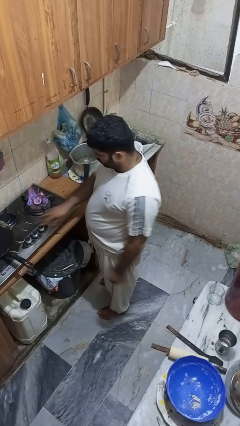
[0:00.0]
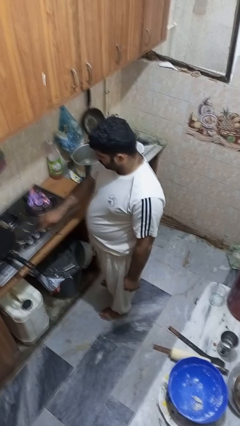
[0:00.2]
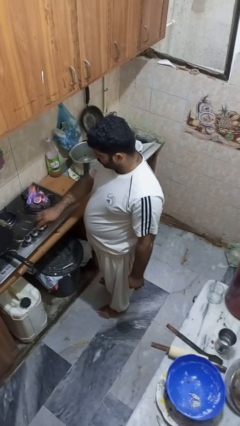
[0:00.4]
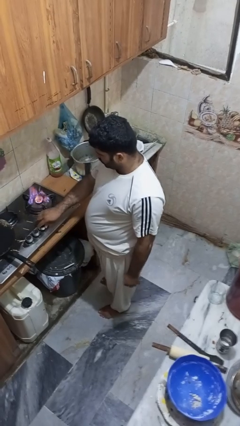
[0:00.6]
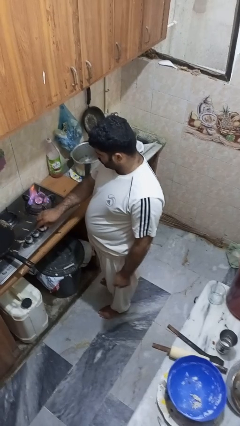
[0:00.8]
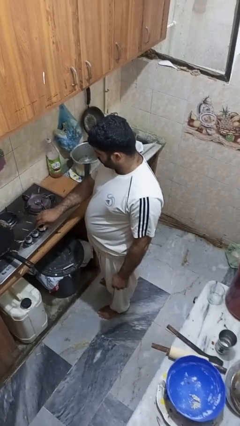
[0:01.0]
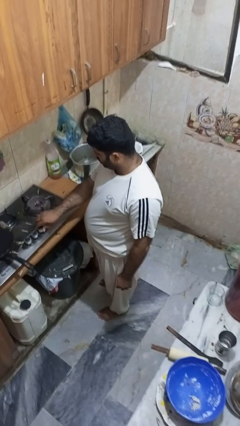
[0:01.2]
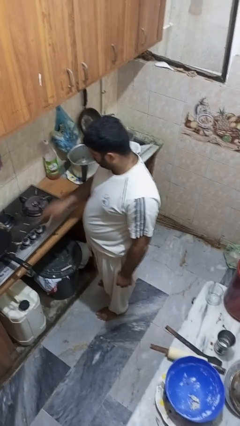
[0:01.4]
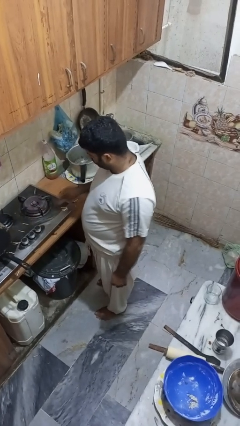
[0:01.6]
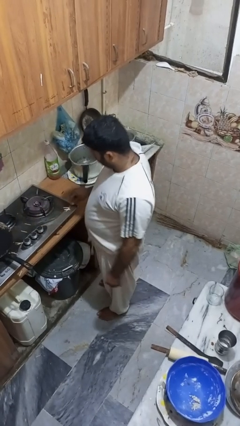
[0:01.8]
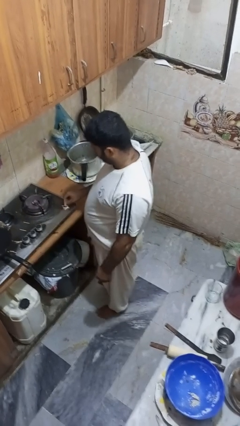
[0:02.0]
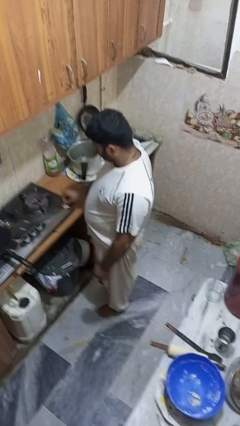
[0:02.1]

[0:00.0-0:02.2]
person turns off stovetop

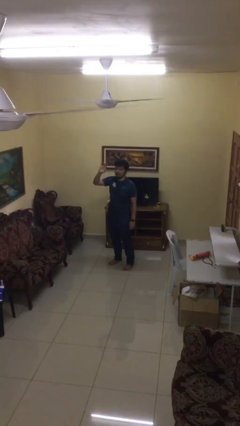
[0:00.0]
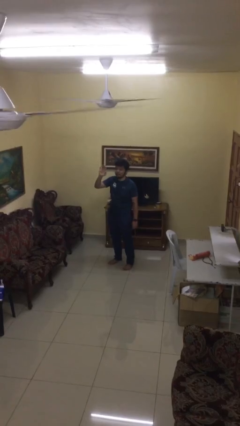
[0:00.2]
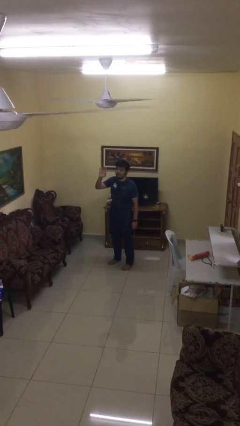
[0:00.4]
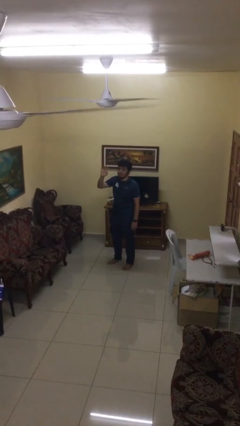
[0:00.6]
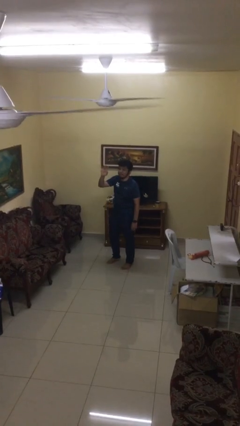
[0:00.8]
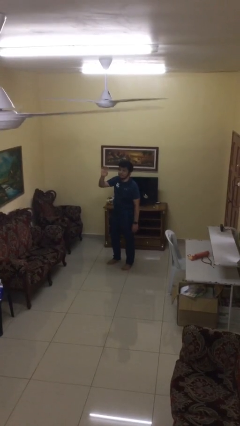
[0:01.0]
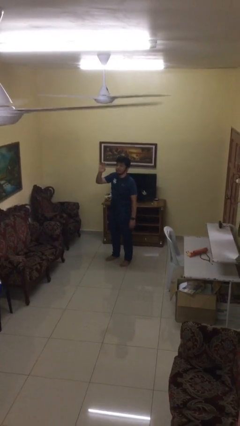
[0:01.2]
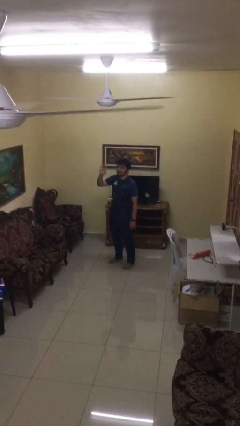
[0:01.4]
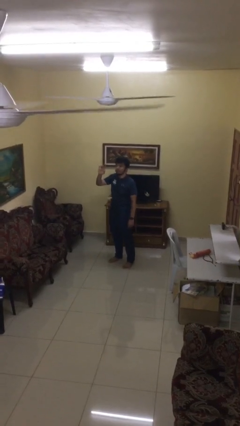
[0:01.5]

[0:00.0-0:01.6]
person gestures lower hand

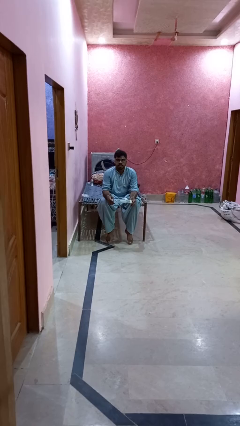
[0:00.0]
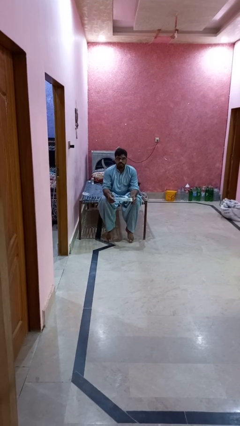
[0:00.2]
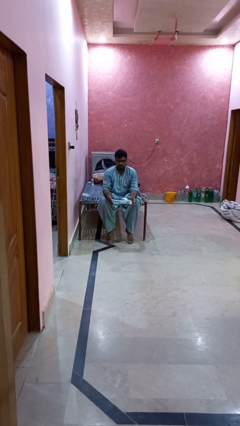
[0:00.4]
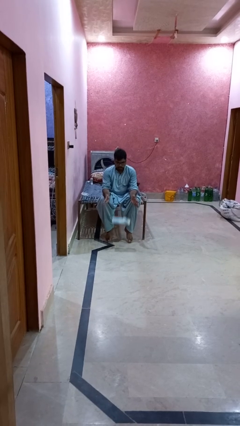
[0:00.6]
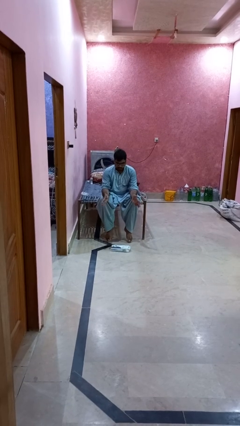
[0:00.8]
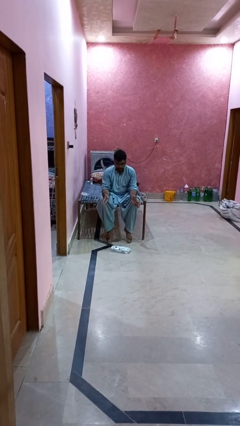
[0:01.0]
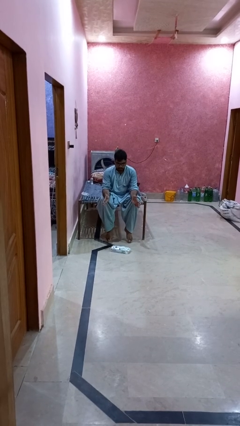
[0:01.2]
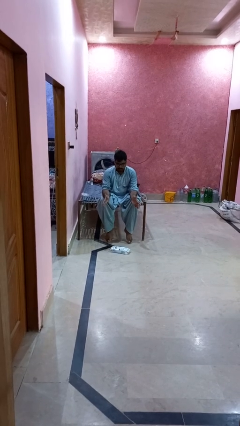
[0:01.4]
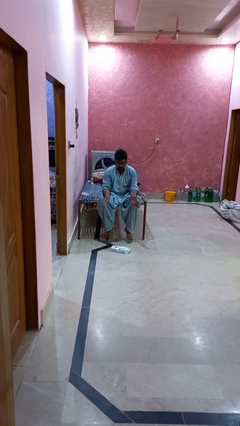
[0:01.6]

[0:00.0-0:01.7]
person drops object

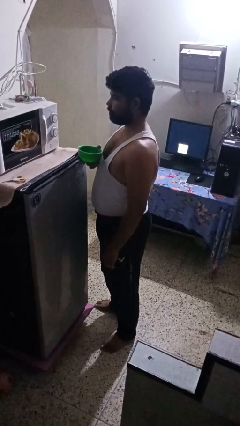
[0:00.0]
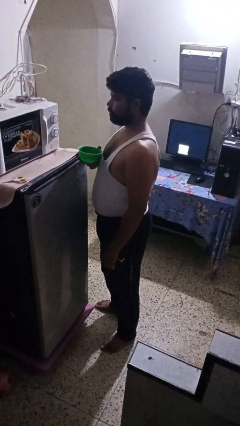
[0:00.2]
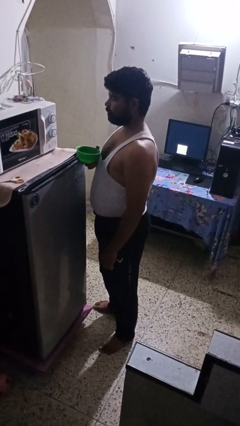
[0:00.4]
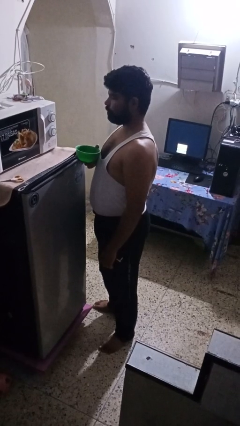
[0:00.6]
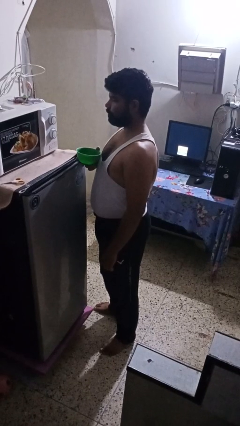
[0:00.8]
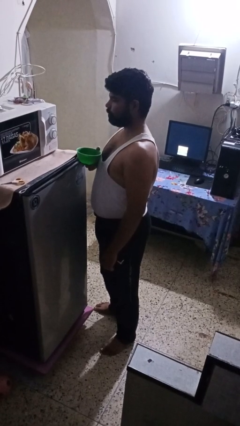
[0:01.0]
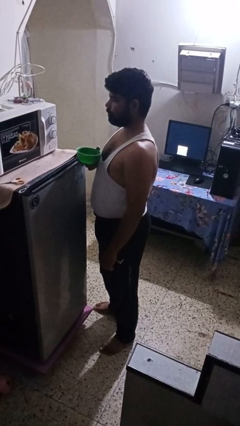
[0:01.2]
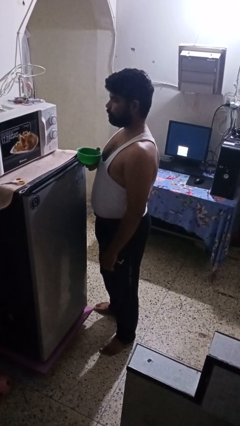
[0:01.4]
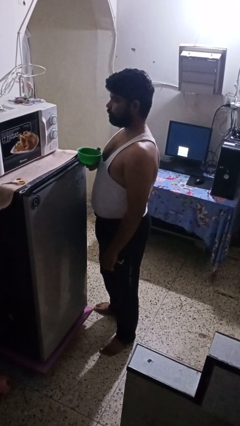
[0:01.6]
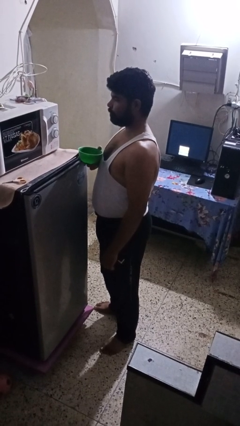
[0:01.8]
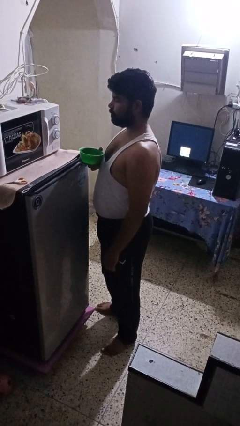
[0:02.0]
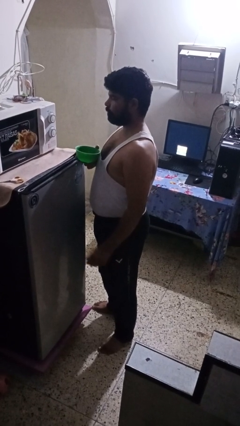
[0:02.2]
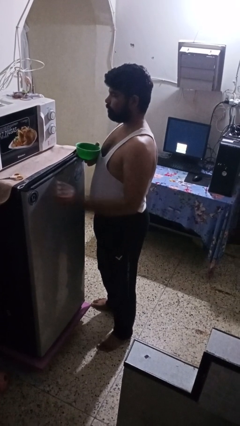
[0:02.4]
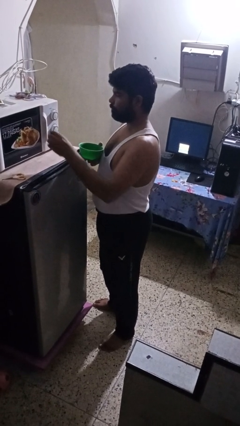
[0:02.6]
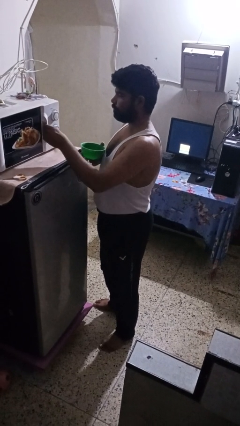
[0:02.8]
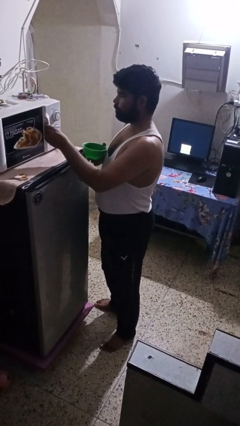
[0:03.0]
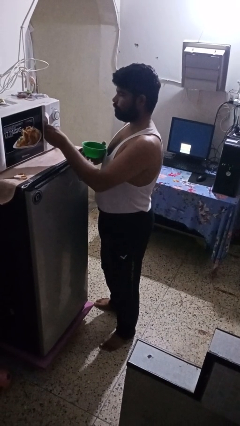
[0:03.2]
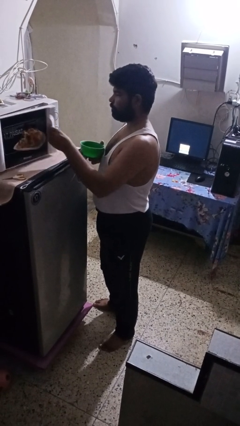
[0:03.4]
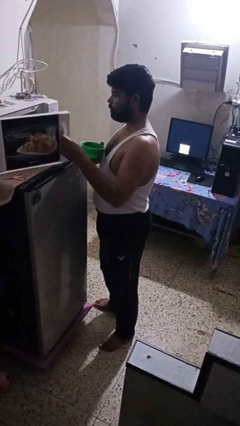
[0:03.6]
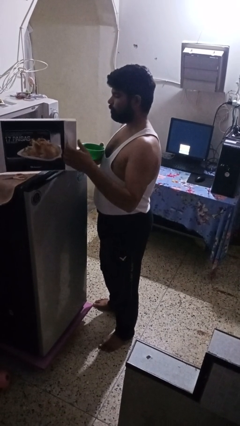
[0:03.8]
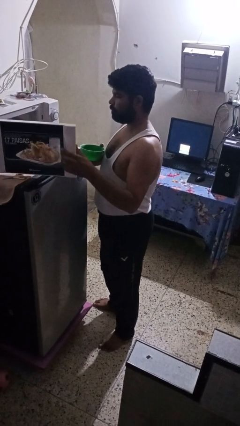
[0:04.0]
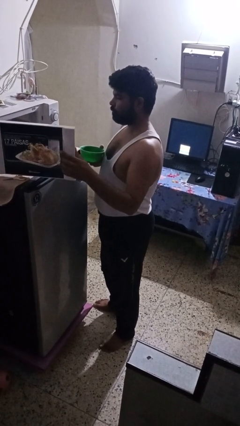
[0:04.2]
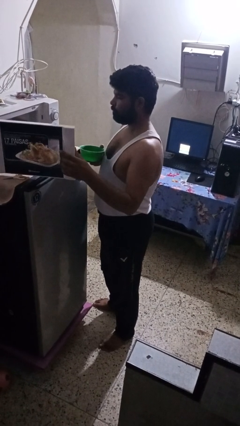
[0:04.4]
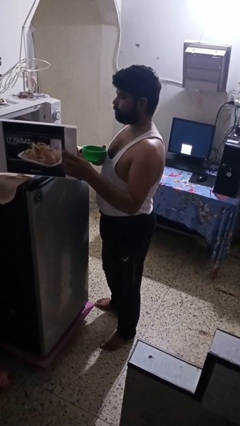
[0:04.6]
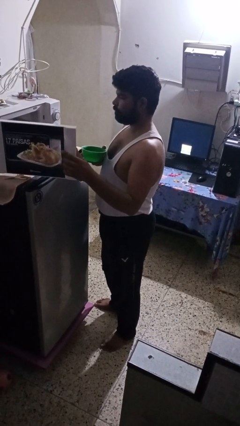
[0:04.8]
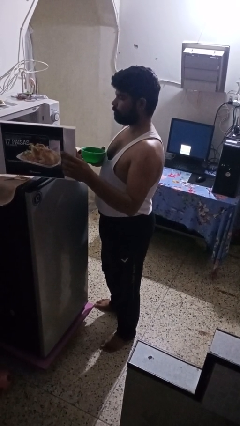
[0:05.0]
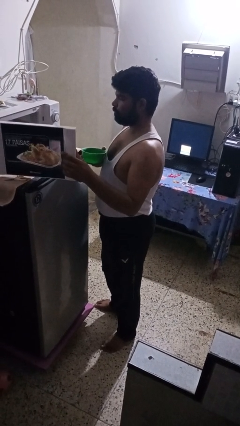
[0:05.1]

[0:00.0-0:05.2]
person opens microwave

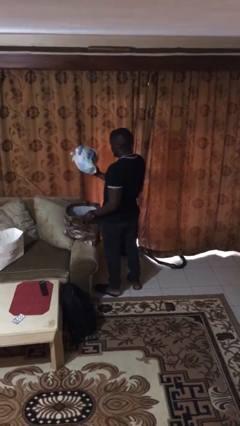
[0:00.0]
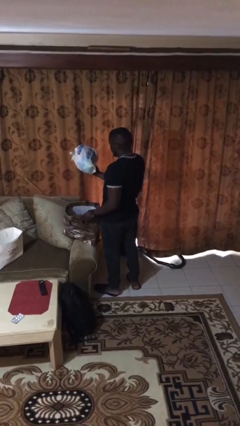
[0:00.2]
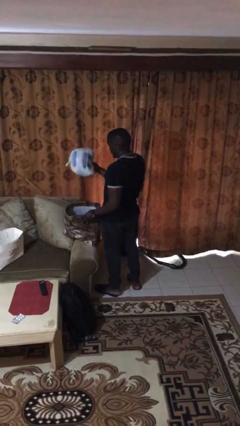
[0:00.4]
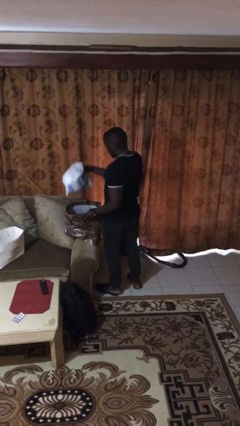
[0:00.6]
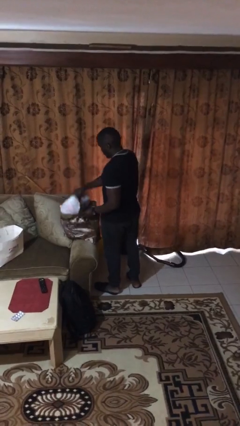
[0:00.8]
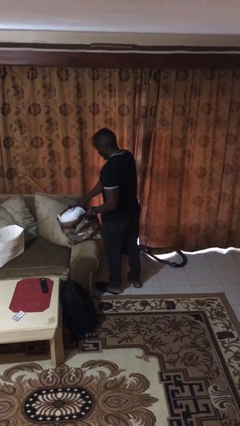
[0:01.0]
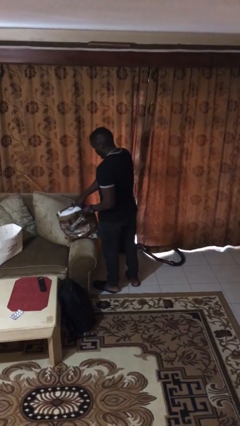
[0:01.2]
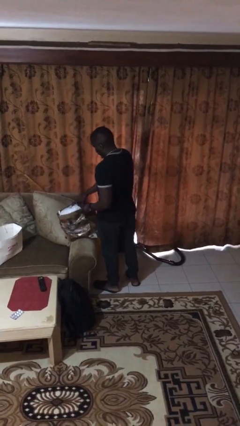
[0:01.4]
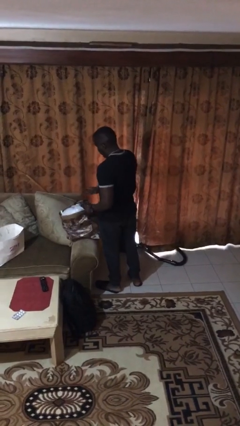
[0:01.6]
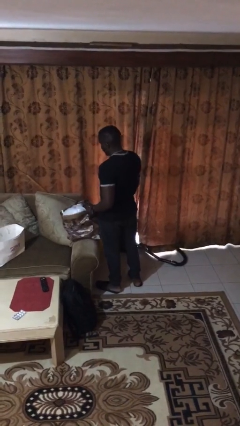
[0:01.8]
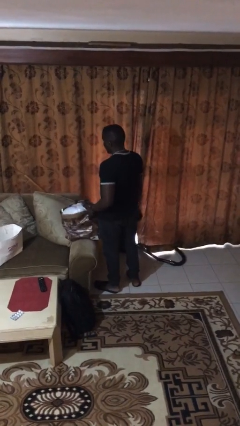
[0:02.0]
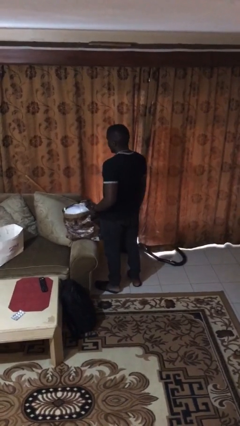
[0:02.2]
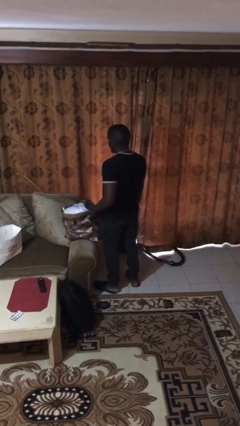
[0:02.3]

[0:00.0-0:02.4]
person puts object into bag

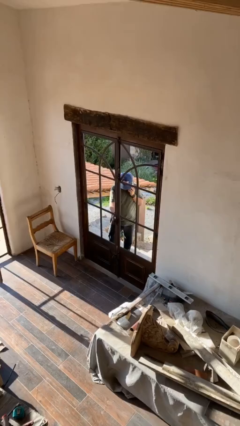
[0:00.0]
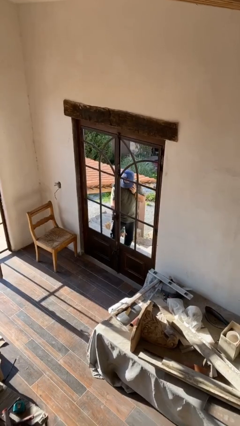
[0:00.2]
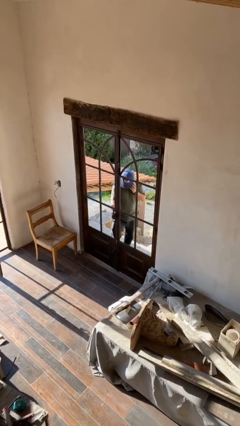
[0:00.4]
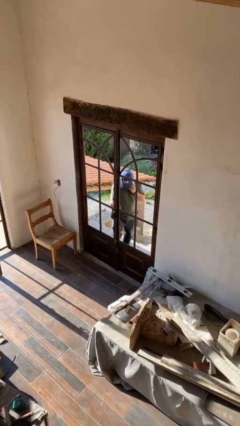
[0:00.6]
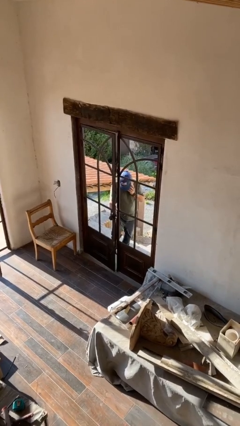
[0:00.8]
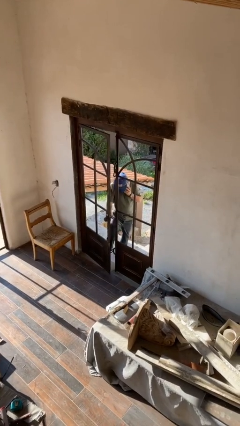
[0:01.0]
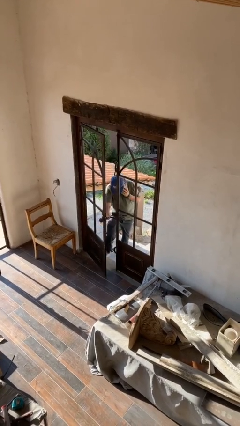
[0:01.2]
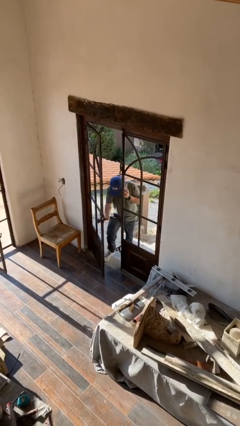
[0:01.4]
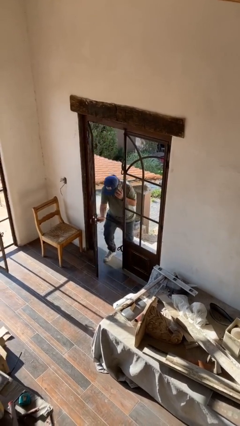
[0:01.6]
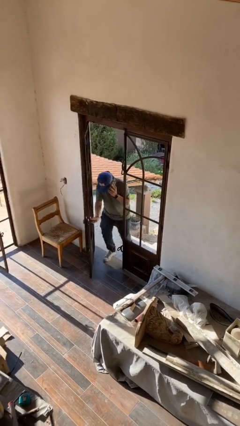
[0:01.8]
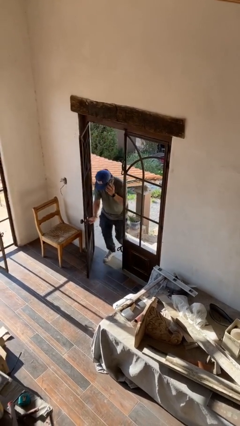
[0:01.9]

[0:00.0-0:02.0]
person opens facility door

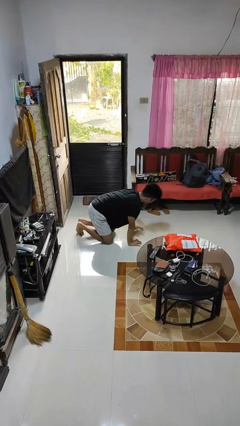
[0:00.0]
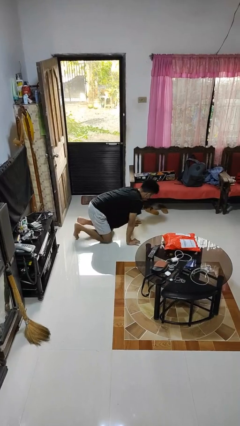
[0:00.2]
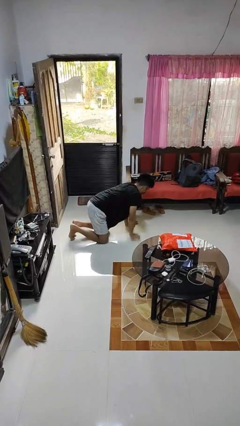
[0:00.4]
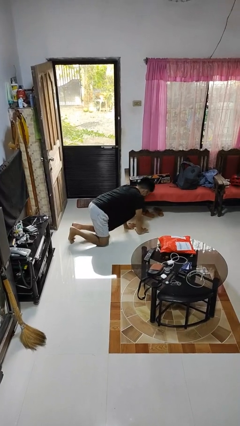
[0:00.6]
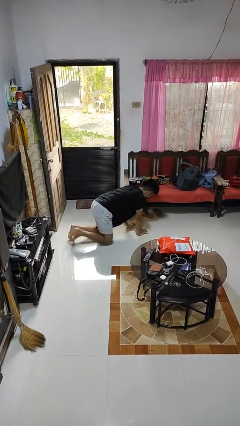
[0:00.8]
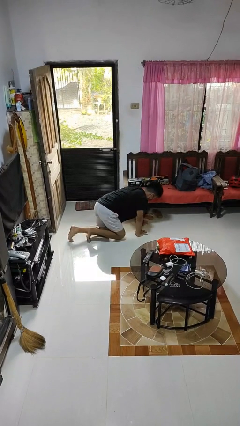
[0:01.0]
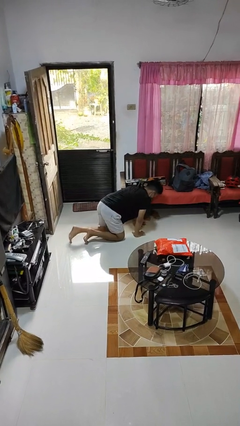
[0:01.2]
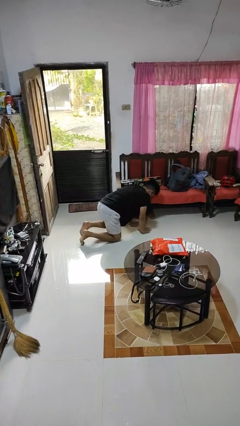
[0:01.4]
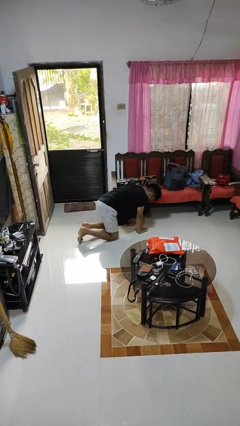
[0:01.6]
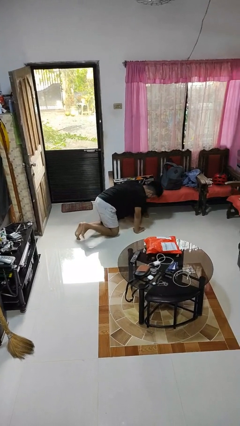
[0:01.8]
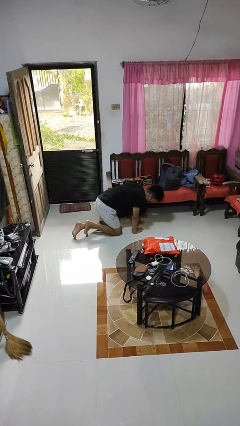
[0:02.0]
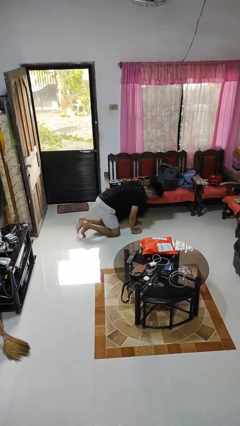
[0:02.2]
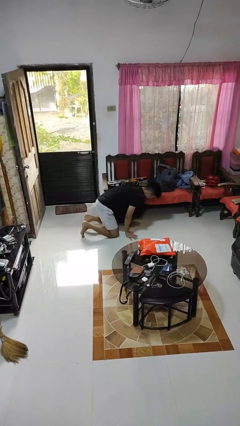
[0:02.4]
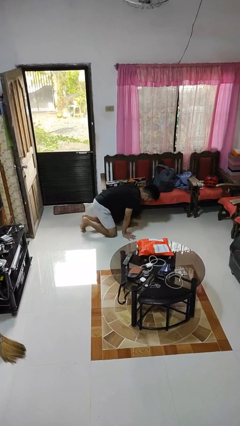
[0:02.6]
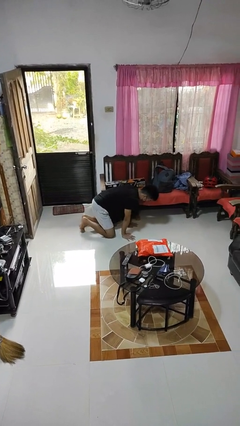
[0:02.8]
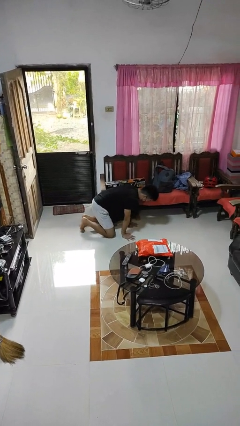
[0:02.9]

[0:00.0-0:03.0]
person crawls
